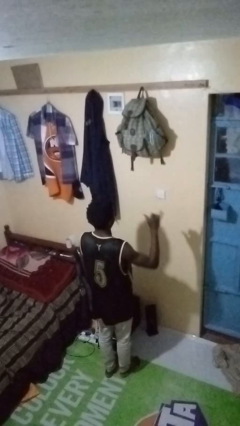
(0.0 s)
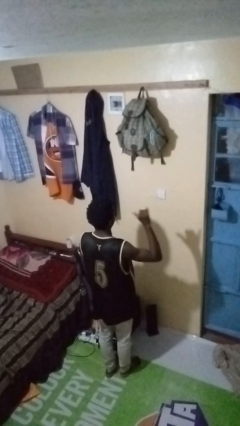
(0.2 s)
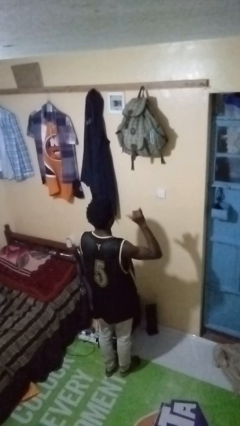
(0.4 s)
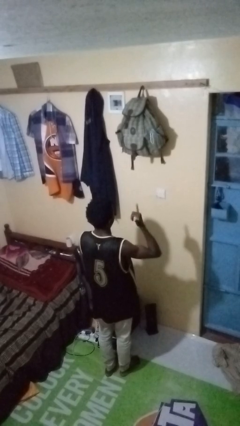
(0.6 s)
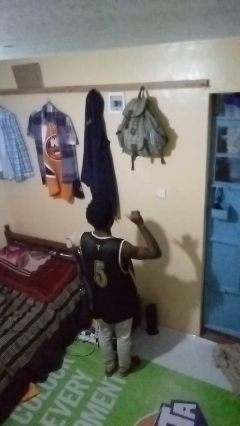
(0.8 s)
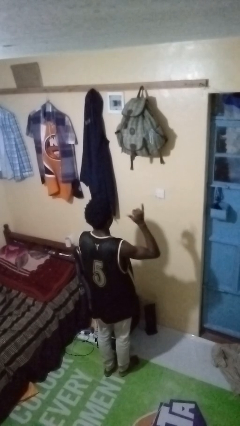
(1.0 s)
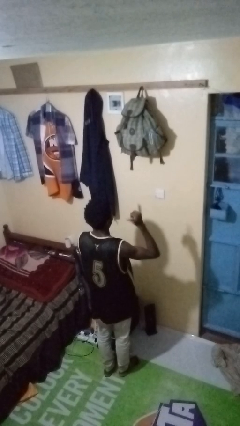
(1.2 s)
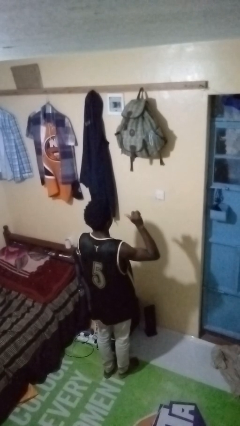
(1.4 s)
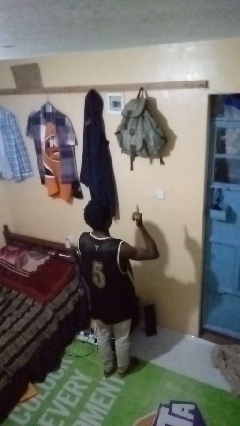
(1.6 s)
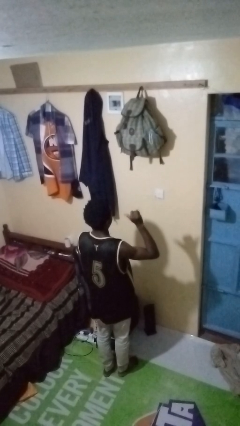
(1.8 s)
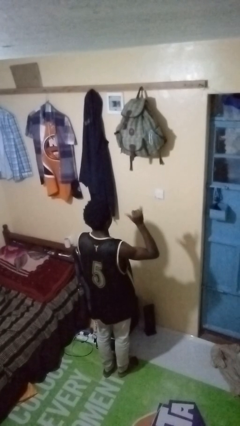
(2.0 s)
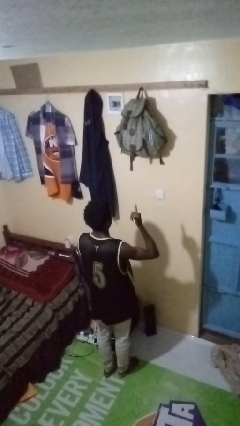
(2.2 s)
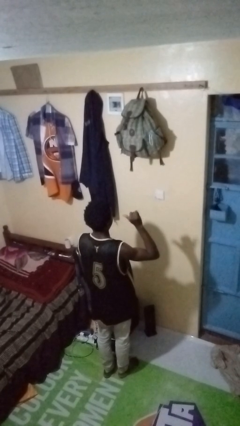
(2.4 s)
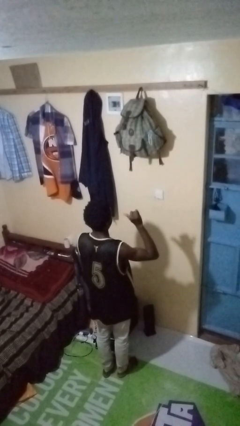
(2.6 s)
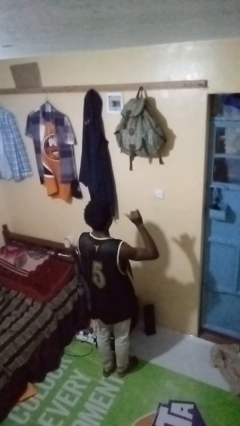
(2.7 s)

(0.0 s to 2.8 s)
person gestures hang loose

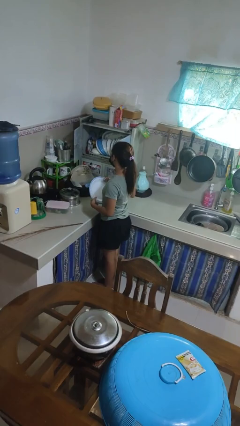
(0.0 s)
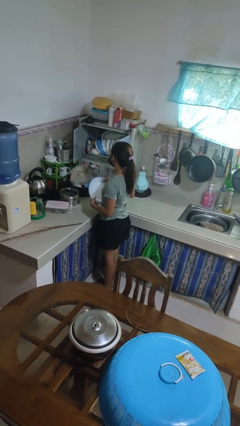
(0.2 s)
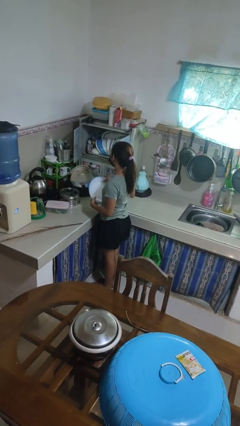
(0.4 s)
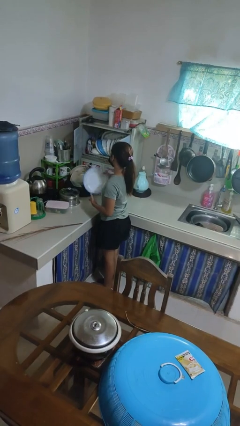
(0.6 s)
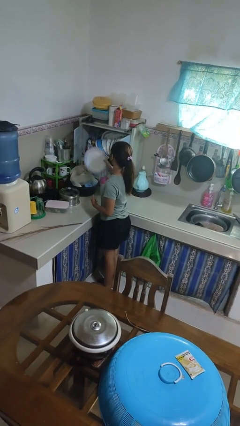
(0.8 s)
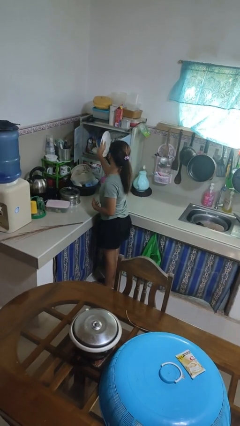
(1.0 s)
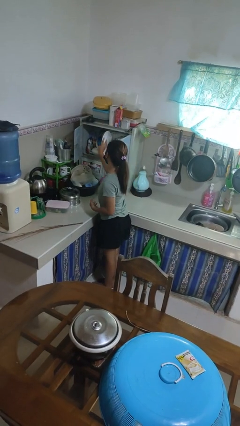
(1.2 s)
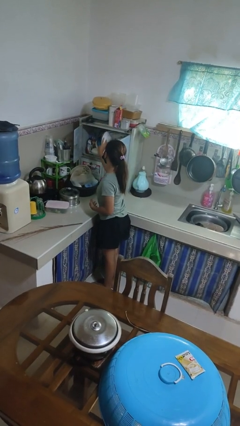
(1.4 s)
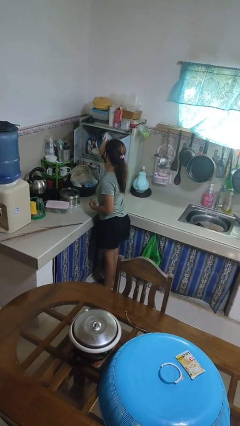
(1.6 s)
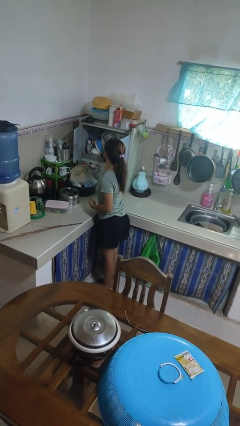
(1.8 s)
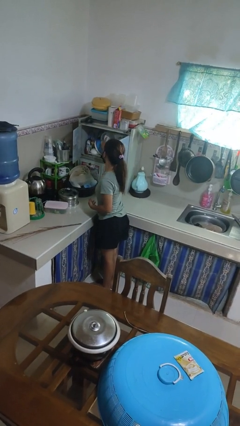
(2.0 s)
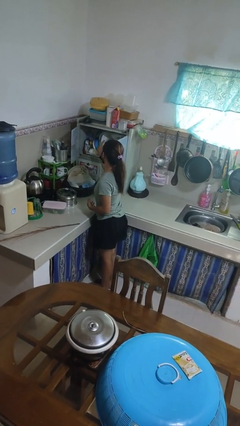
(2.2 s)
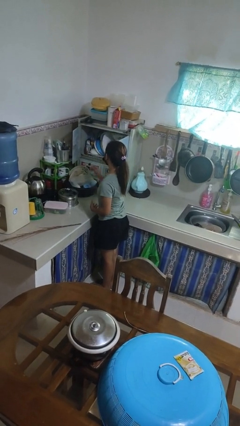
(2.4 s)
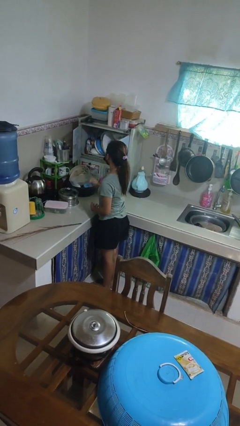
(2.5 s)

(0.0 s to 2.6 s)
person puts object into kitchen drawer

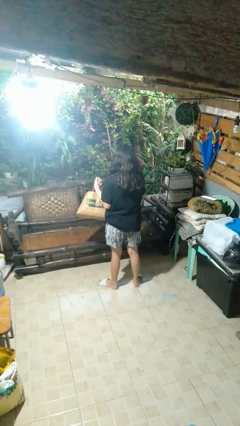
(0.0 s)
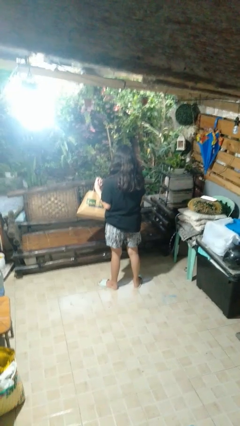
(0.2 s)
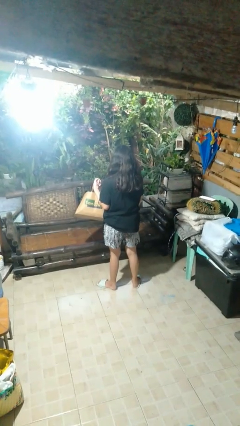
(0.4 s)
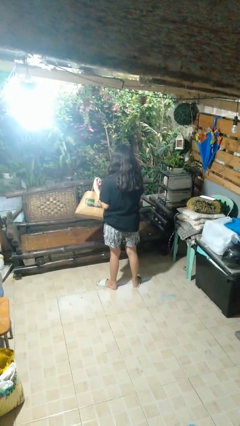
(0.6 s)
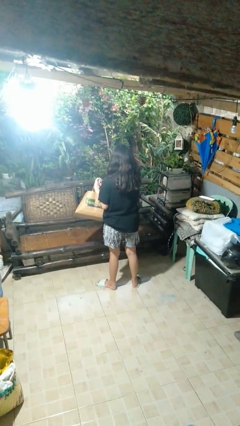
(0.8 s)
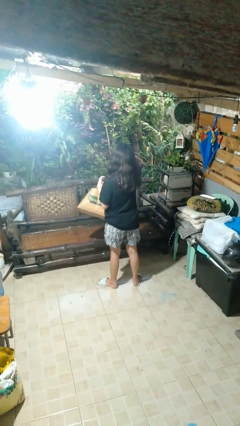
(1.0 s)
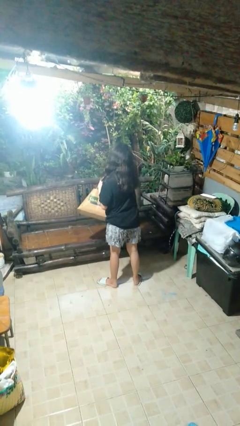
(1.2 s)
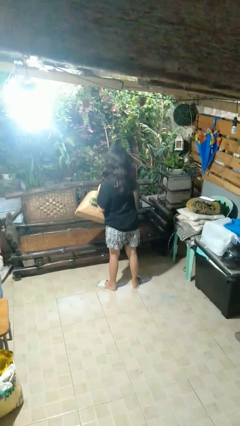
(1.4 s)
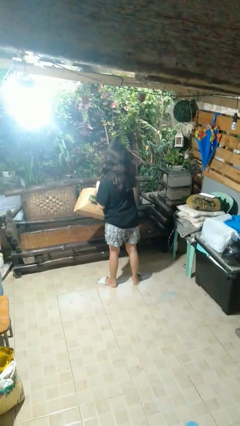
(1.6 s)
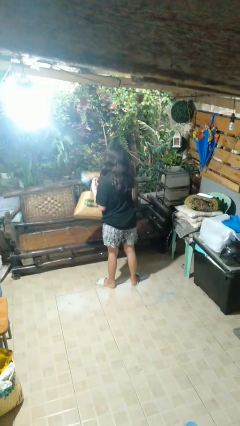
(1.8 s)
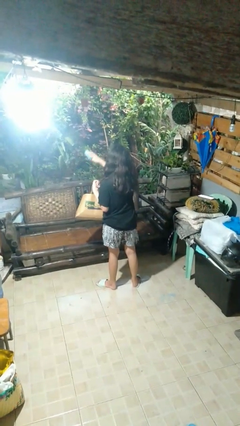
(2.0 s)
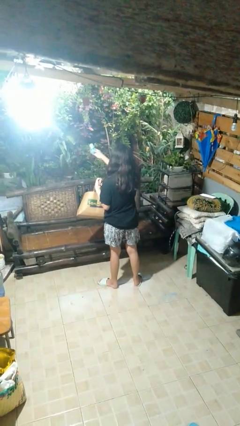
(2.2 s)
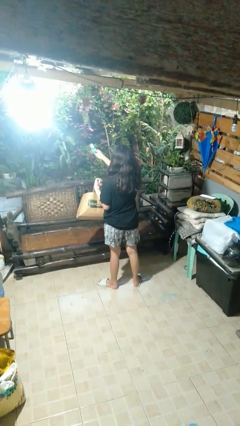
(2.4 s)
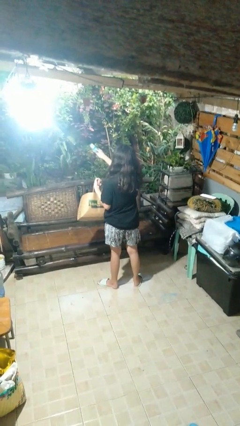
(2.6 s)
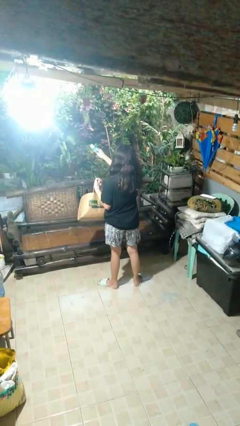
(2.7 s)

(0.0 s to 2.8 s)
person takes object from bag

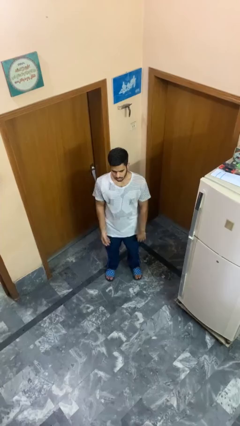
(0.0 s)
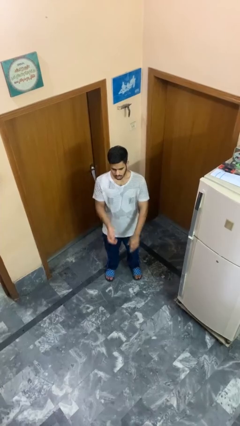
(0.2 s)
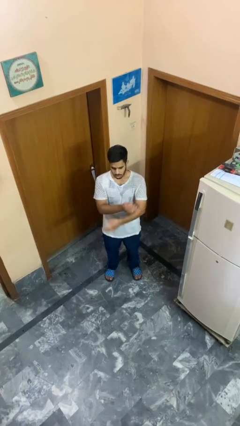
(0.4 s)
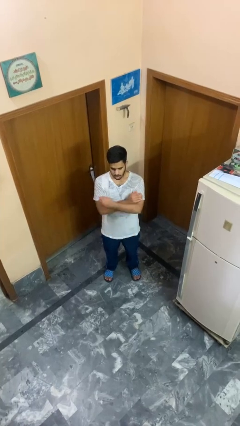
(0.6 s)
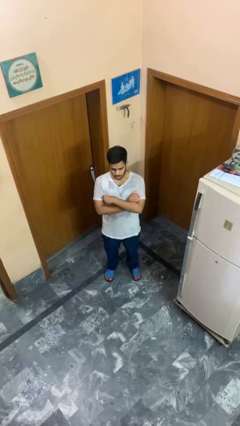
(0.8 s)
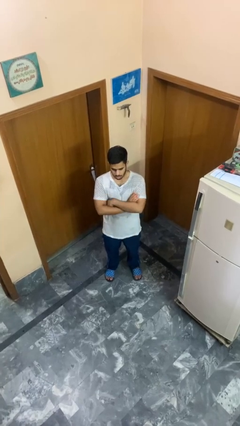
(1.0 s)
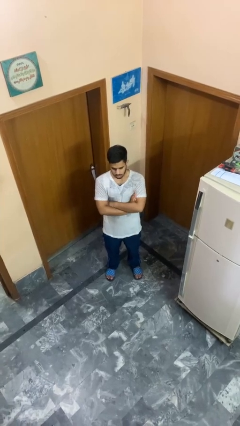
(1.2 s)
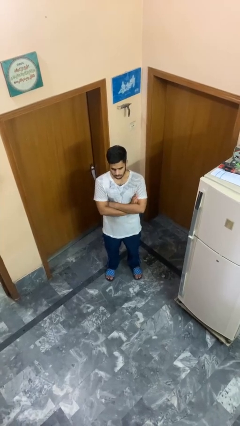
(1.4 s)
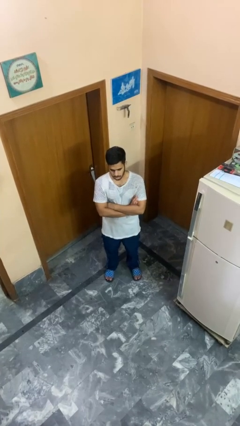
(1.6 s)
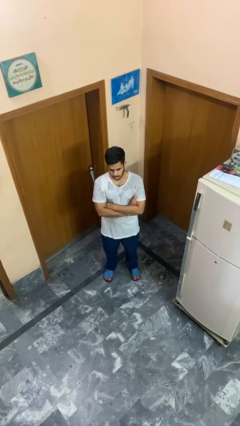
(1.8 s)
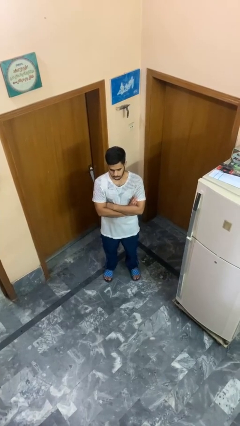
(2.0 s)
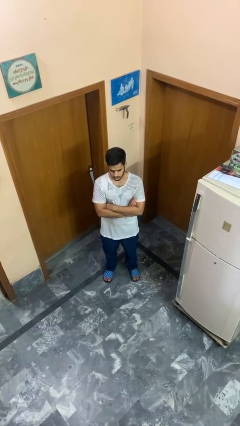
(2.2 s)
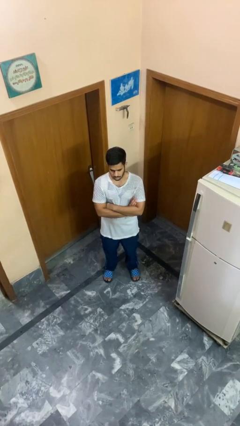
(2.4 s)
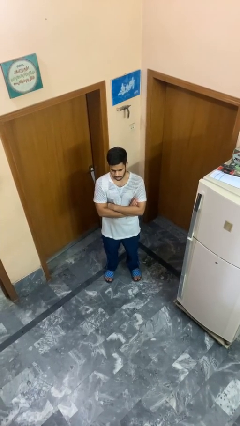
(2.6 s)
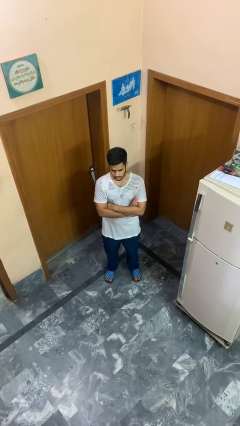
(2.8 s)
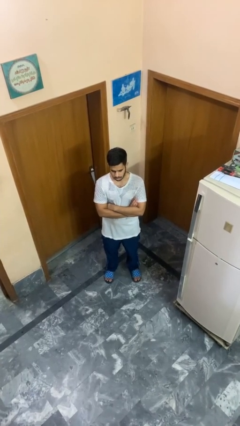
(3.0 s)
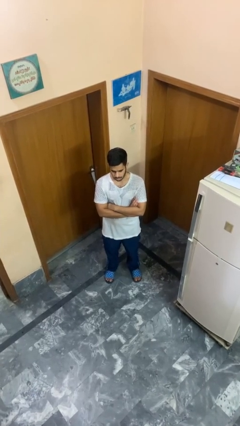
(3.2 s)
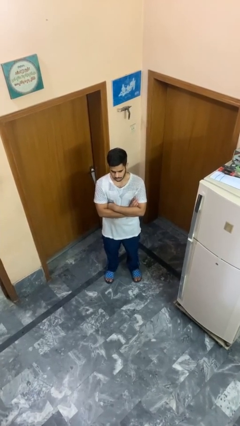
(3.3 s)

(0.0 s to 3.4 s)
person crosses arms

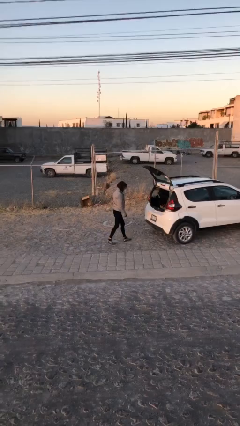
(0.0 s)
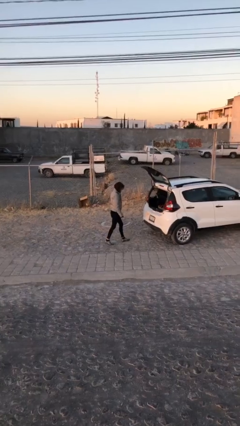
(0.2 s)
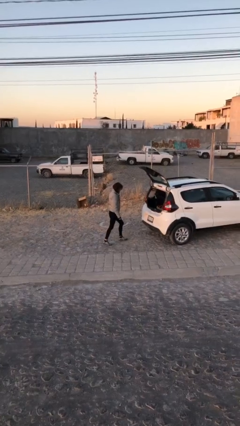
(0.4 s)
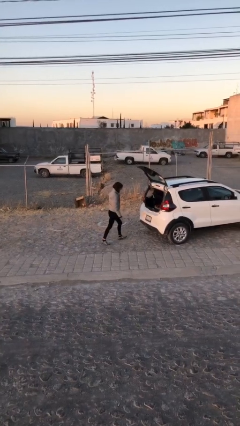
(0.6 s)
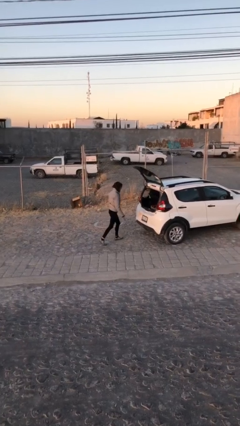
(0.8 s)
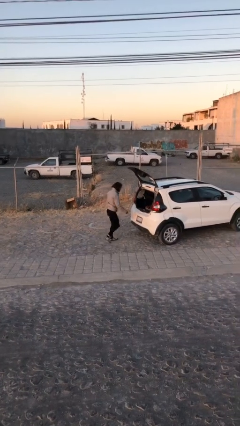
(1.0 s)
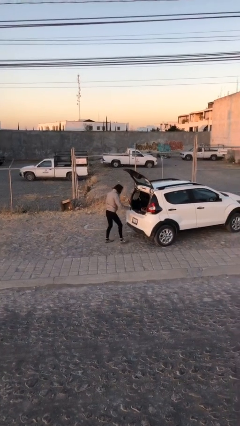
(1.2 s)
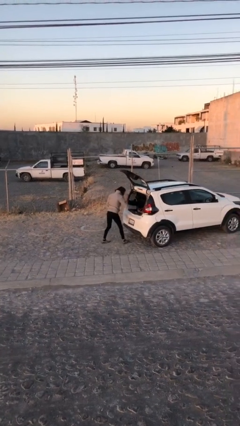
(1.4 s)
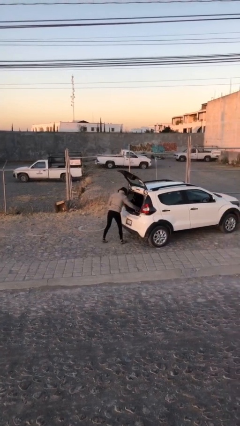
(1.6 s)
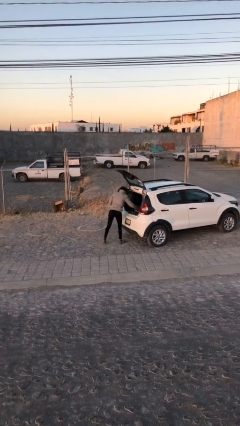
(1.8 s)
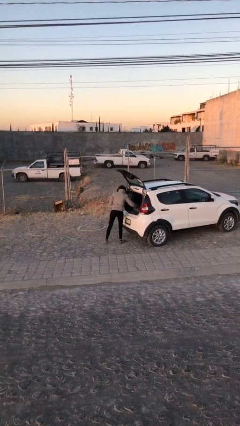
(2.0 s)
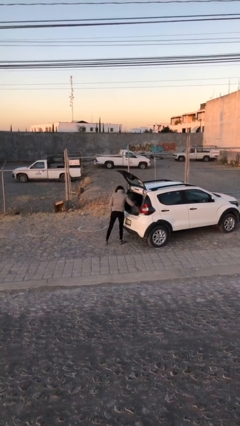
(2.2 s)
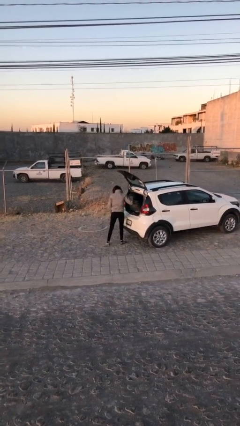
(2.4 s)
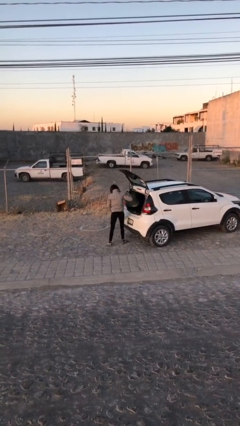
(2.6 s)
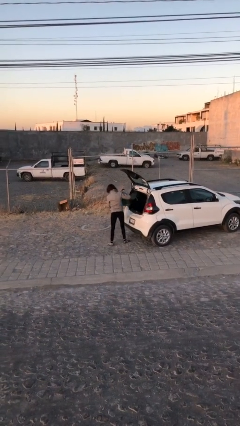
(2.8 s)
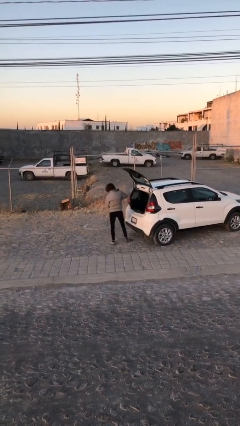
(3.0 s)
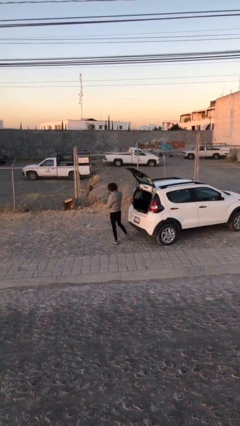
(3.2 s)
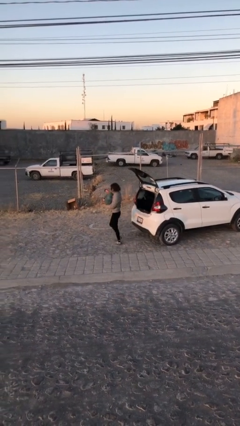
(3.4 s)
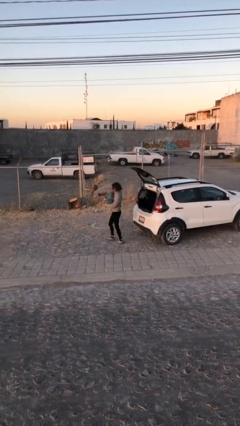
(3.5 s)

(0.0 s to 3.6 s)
person unloads car

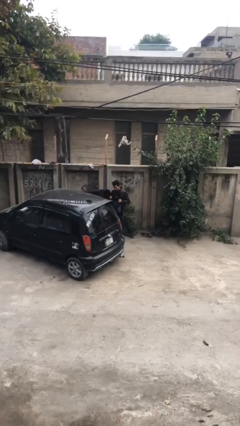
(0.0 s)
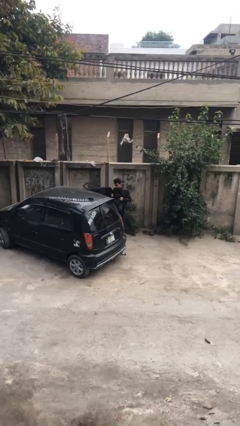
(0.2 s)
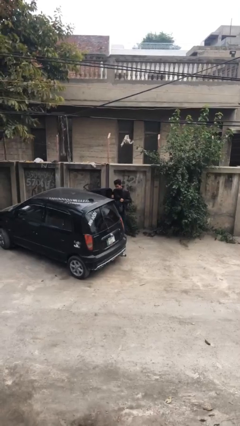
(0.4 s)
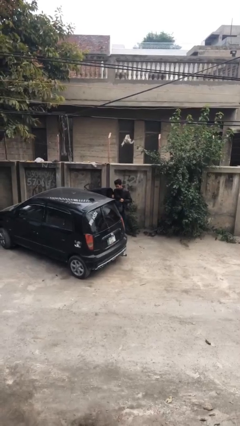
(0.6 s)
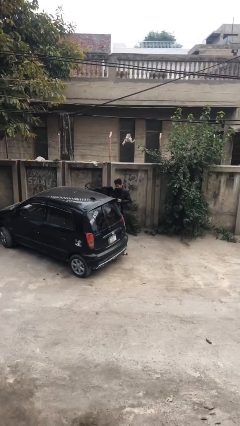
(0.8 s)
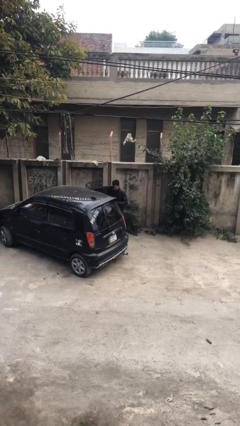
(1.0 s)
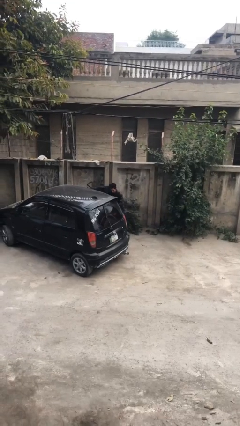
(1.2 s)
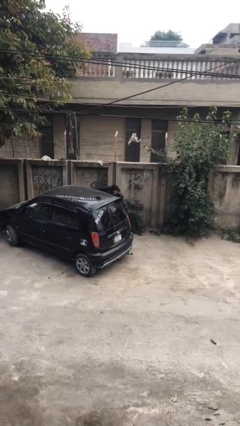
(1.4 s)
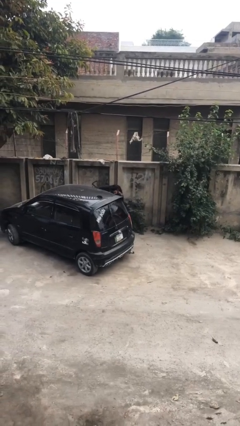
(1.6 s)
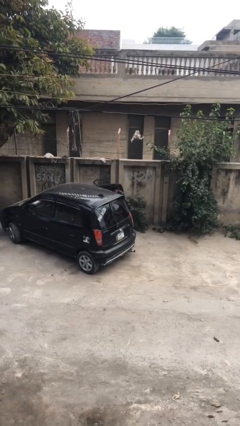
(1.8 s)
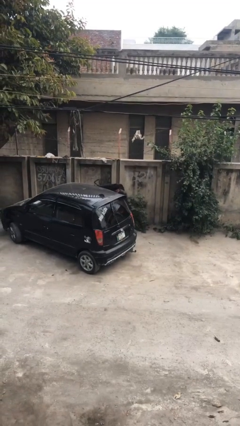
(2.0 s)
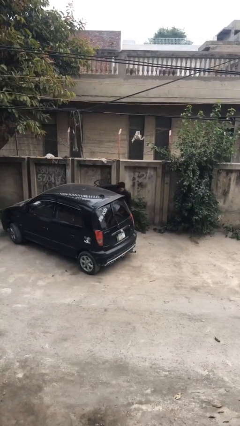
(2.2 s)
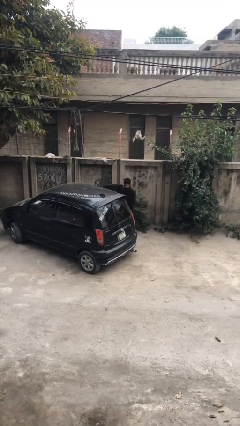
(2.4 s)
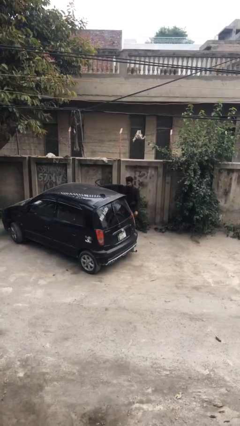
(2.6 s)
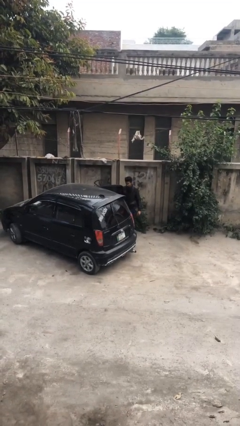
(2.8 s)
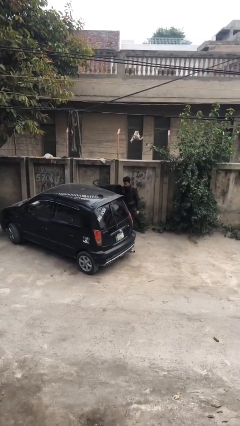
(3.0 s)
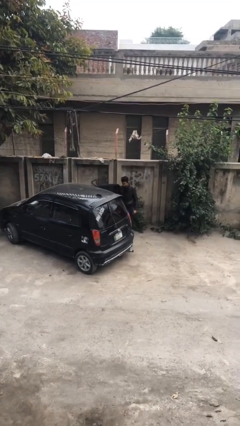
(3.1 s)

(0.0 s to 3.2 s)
person loads car
